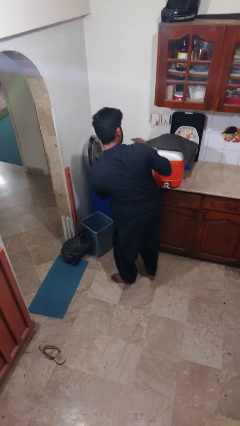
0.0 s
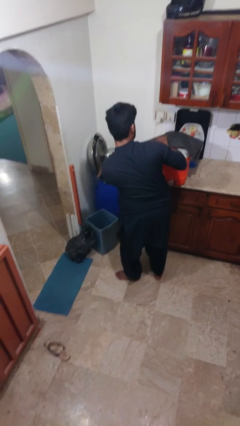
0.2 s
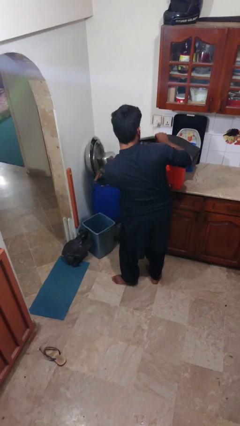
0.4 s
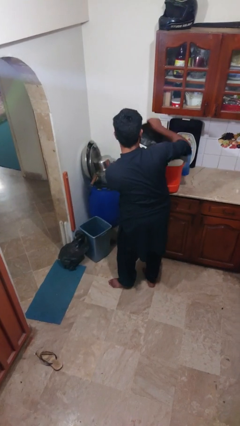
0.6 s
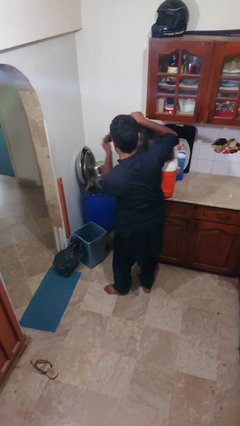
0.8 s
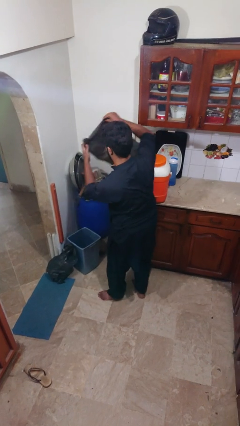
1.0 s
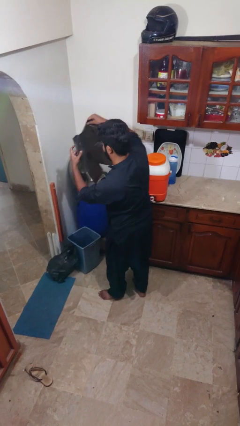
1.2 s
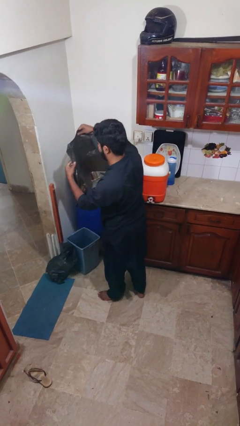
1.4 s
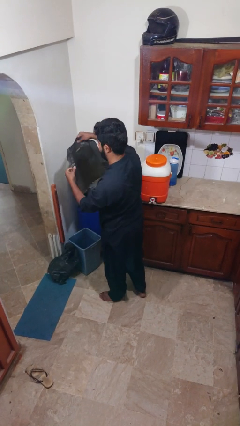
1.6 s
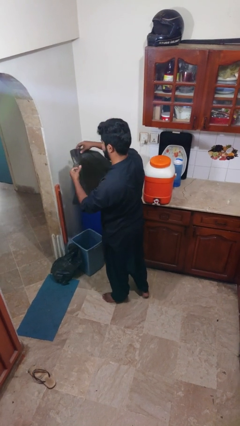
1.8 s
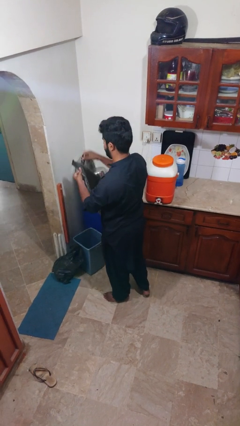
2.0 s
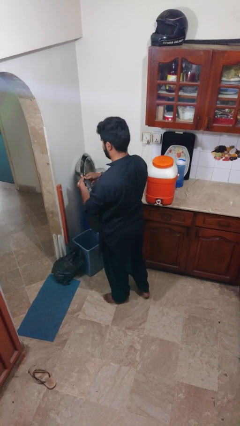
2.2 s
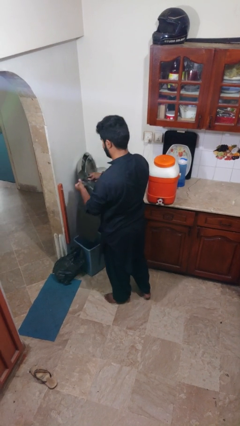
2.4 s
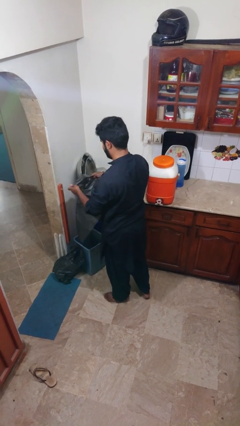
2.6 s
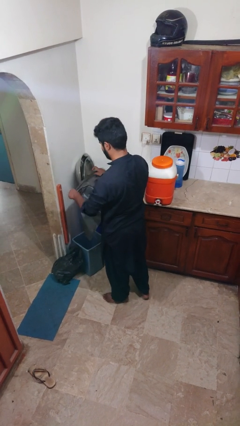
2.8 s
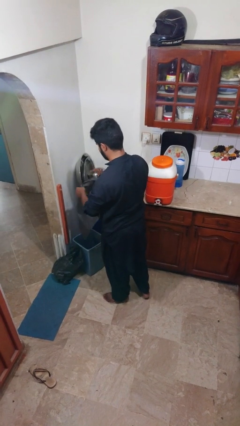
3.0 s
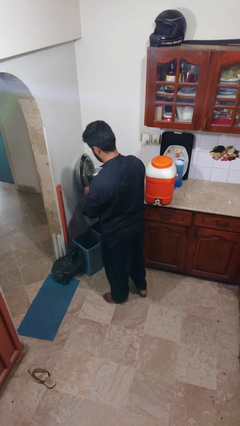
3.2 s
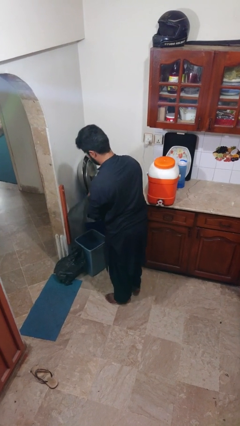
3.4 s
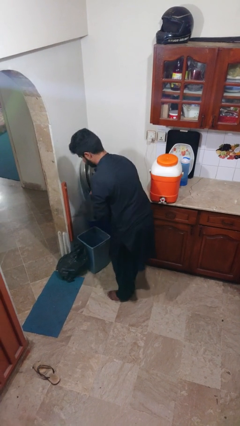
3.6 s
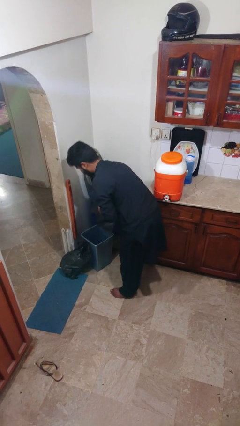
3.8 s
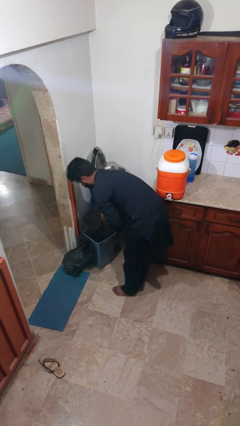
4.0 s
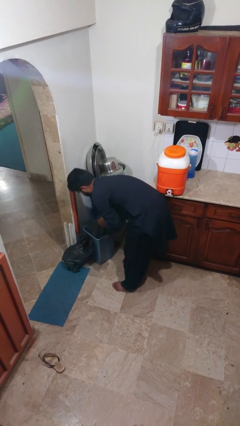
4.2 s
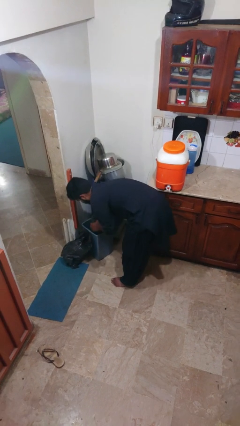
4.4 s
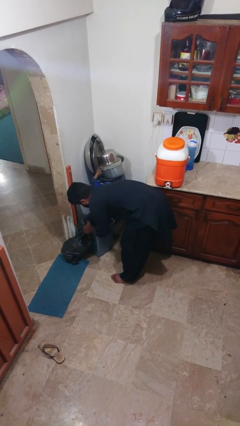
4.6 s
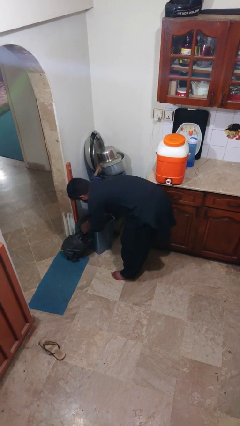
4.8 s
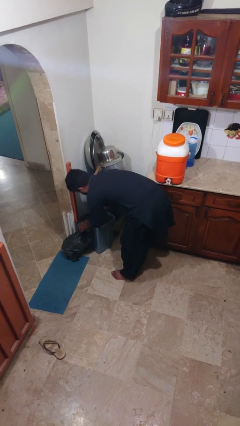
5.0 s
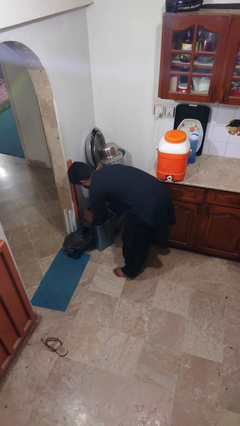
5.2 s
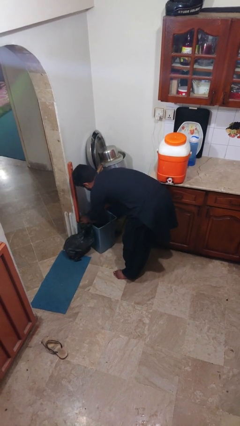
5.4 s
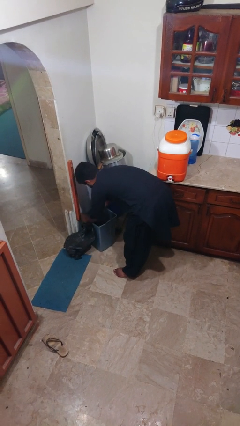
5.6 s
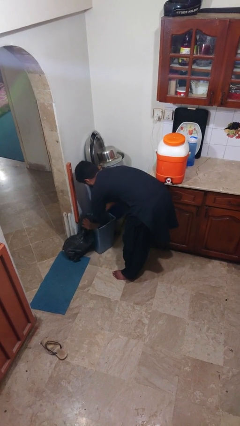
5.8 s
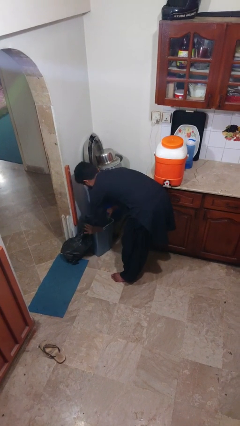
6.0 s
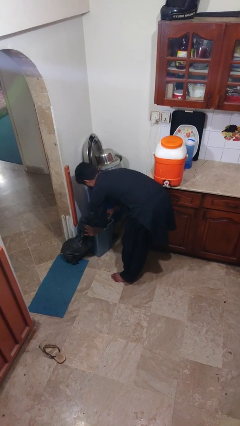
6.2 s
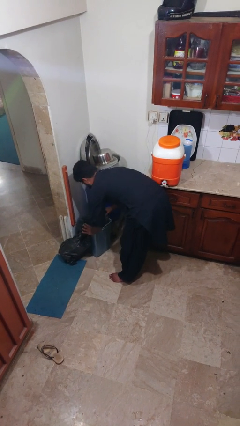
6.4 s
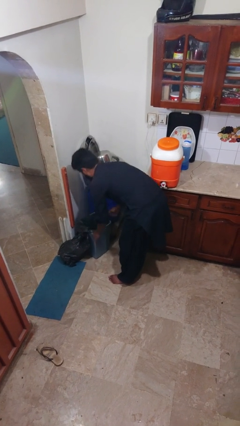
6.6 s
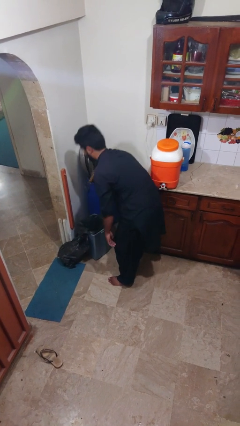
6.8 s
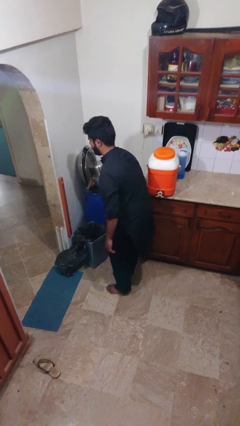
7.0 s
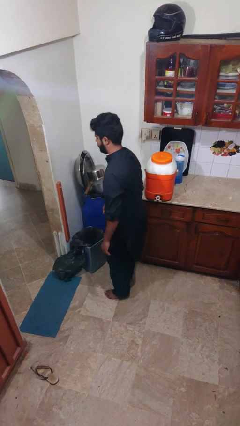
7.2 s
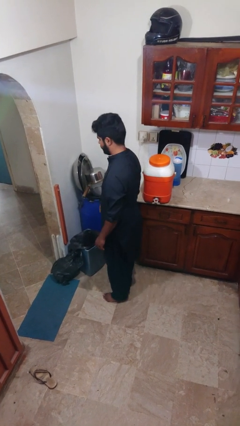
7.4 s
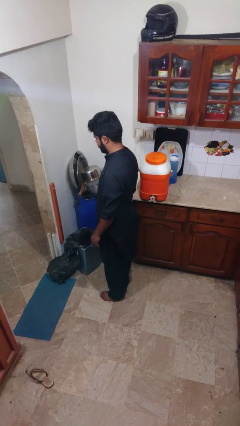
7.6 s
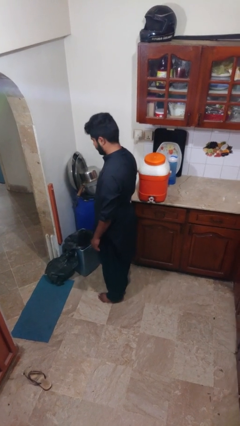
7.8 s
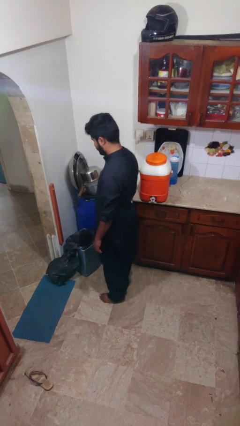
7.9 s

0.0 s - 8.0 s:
person inserts trashbag into trashcan

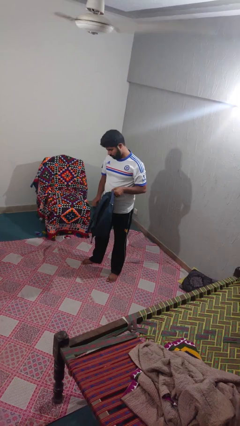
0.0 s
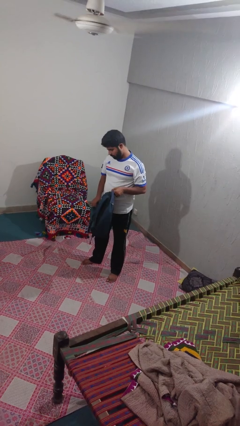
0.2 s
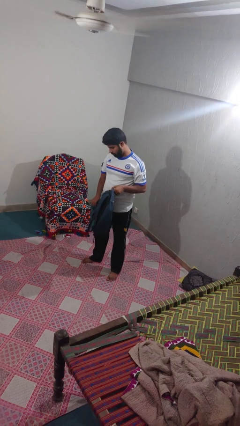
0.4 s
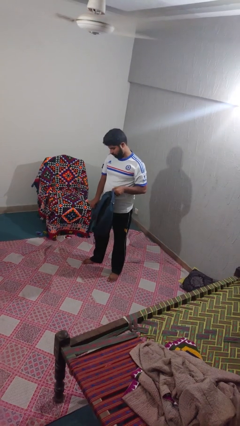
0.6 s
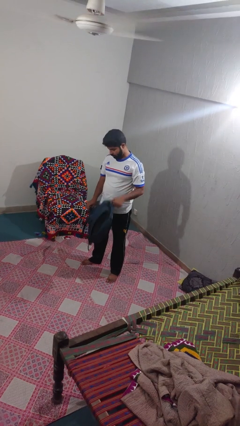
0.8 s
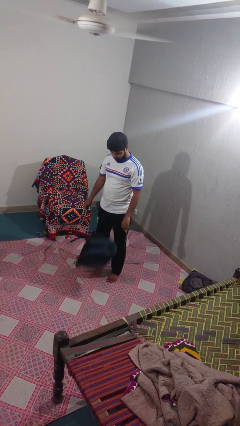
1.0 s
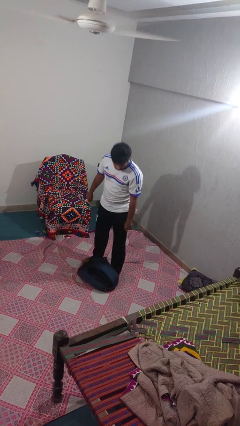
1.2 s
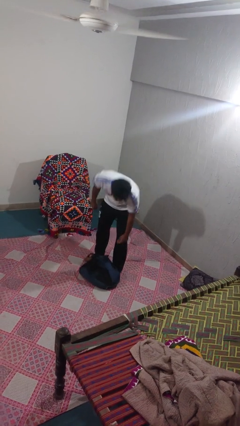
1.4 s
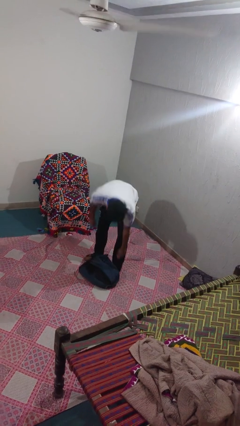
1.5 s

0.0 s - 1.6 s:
person drops object

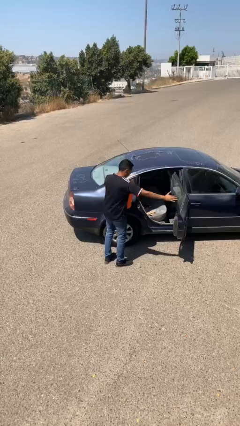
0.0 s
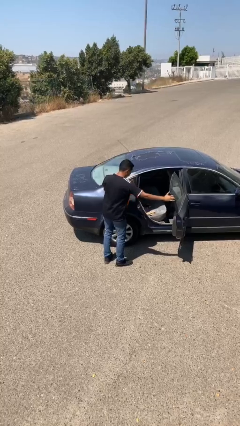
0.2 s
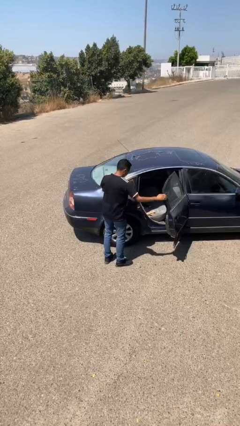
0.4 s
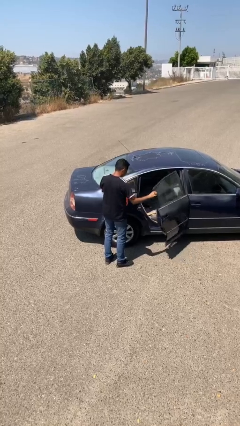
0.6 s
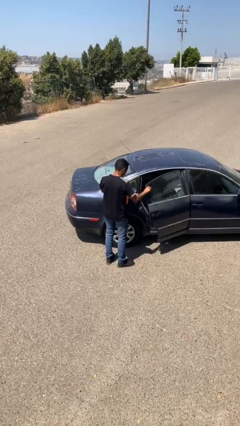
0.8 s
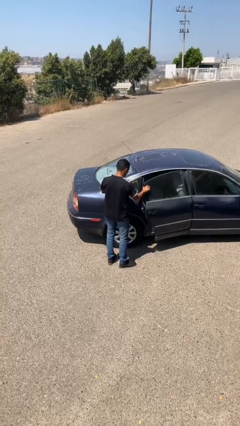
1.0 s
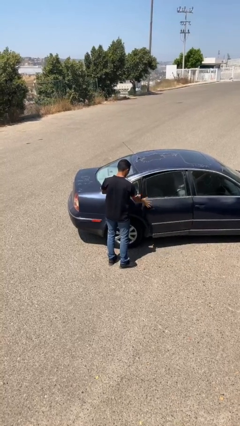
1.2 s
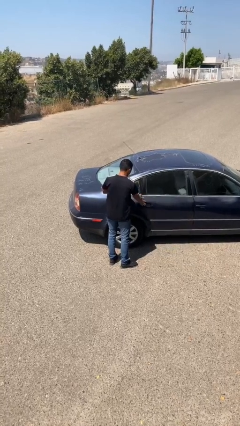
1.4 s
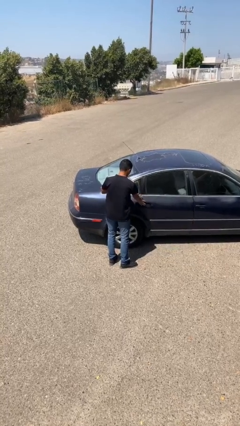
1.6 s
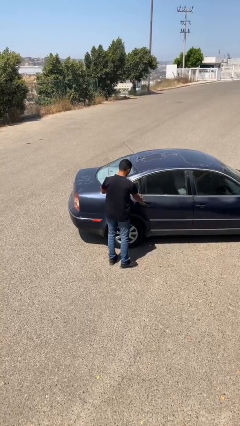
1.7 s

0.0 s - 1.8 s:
person closes car door

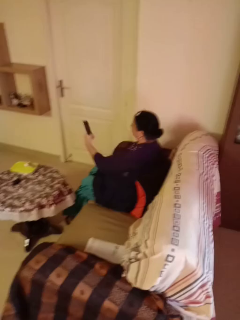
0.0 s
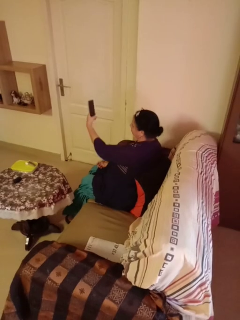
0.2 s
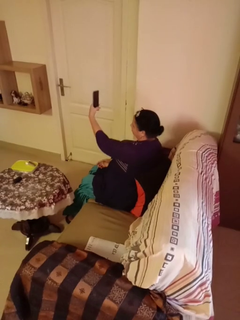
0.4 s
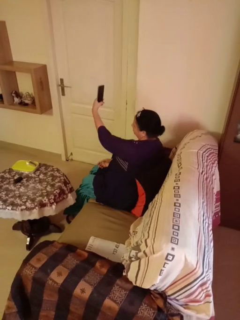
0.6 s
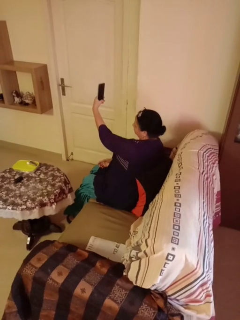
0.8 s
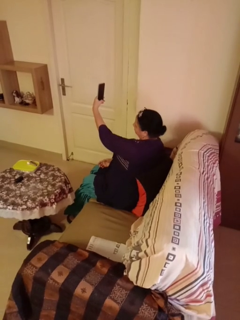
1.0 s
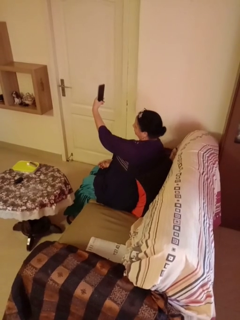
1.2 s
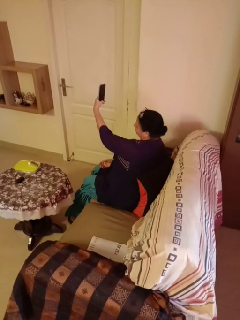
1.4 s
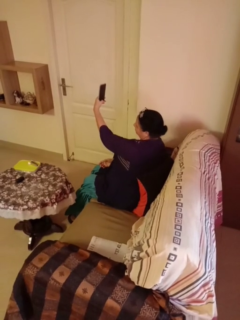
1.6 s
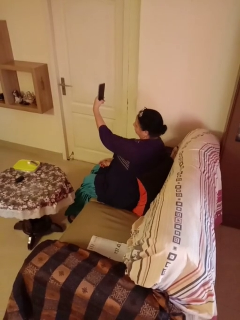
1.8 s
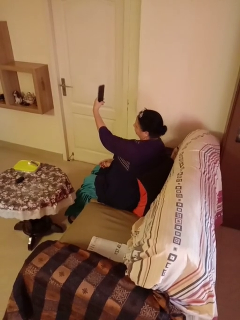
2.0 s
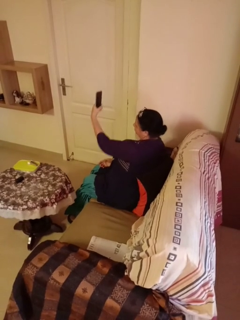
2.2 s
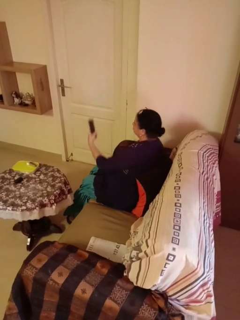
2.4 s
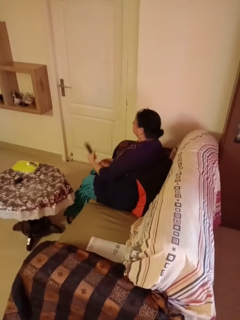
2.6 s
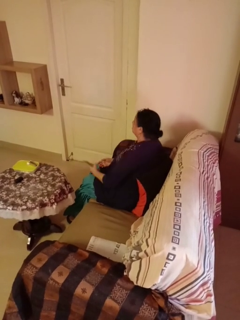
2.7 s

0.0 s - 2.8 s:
person takes selfie

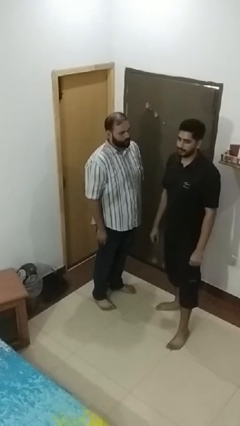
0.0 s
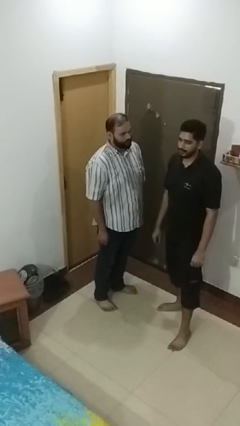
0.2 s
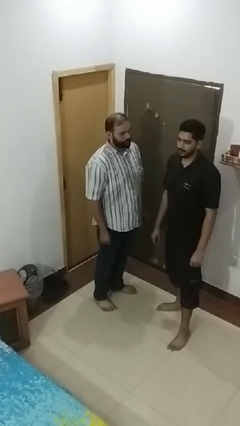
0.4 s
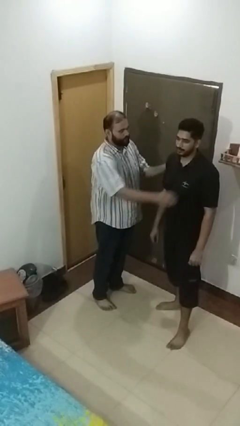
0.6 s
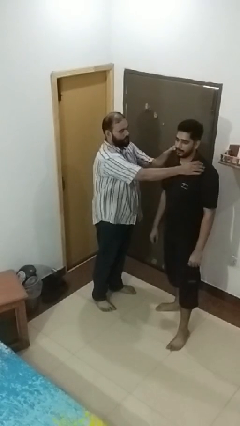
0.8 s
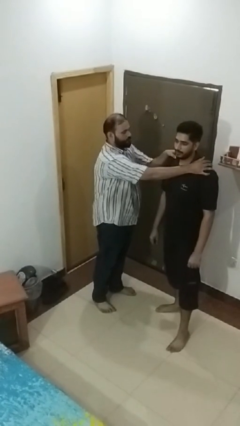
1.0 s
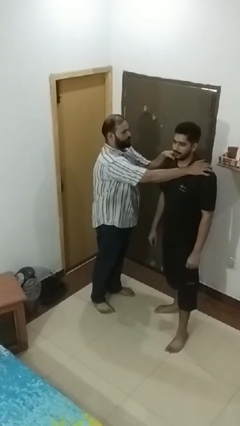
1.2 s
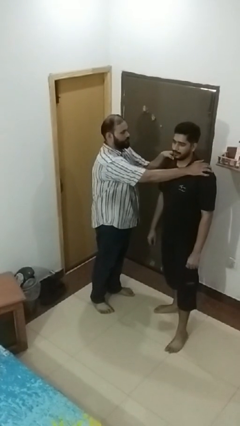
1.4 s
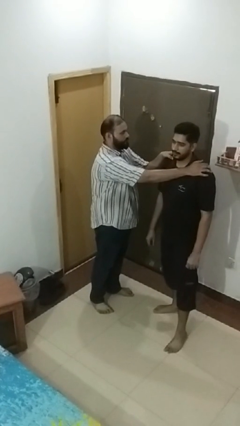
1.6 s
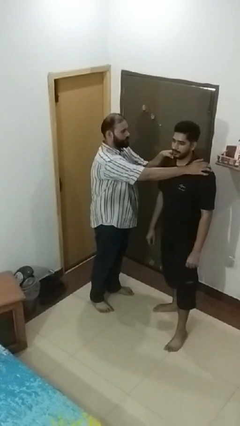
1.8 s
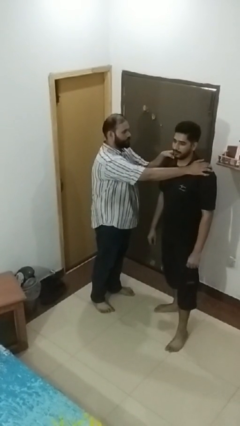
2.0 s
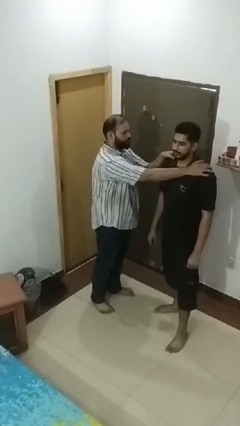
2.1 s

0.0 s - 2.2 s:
person grabs person by shoulder

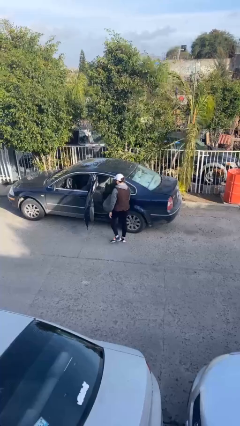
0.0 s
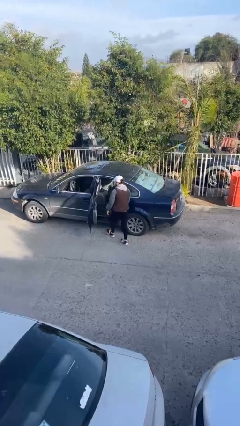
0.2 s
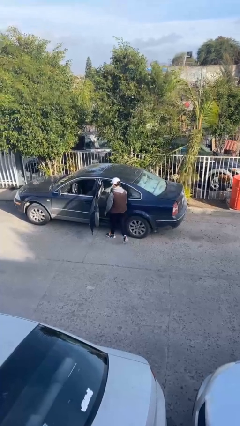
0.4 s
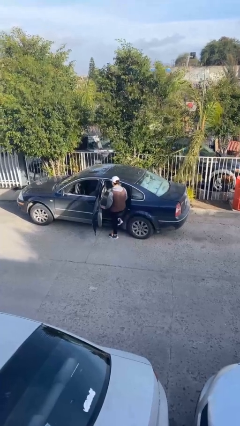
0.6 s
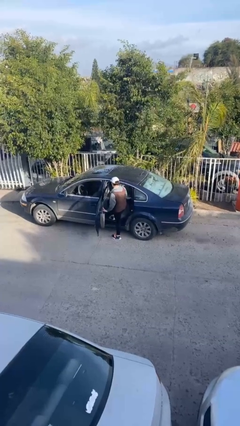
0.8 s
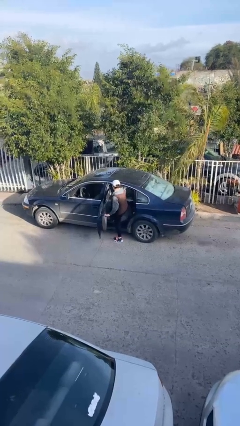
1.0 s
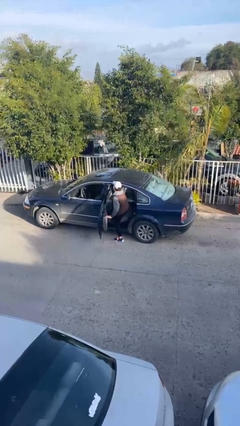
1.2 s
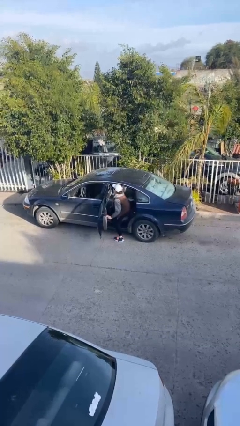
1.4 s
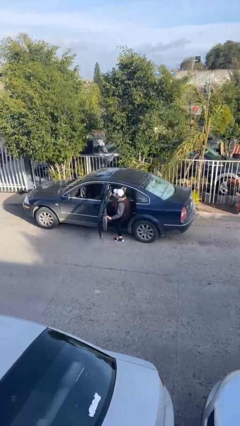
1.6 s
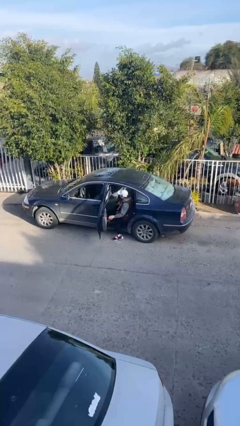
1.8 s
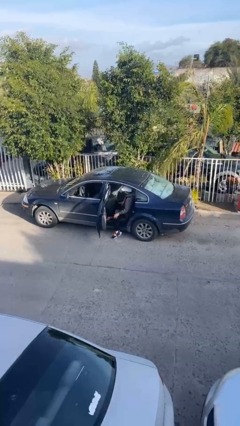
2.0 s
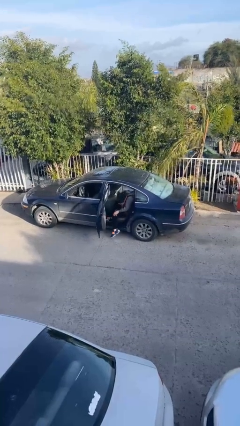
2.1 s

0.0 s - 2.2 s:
person enters car
